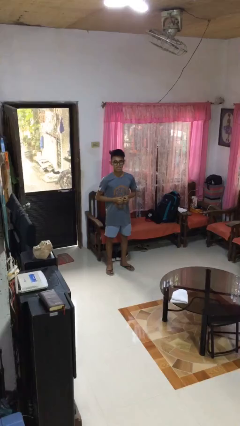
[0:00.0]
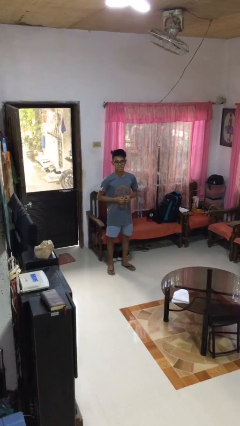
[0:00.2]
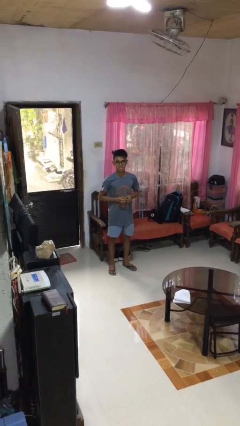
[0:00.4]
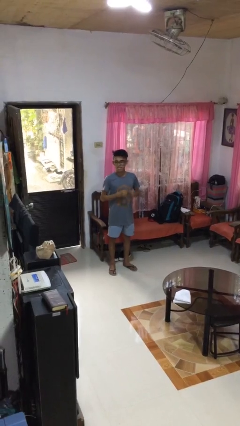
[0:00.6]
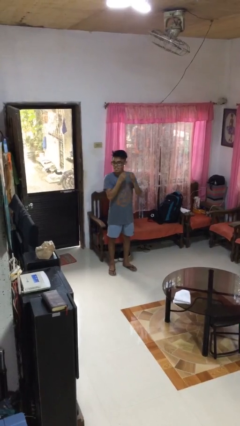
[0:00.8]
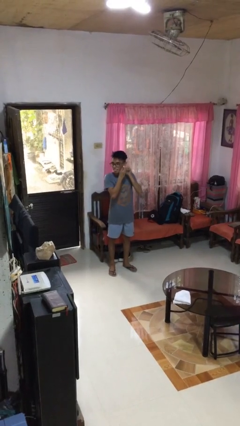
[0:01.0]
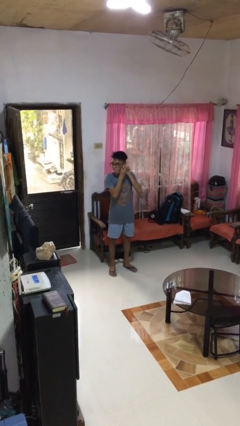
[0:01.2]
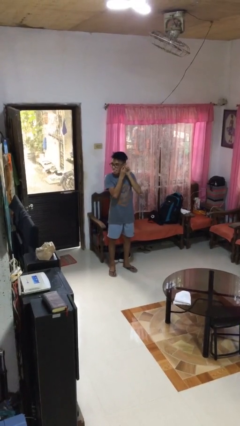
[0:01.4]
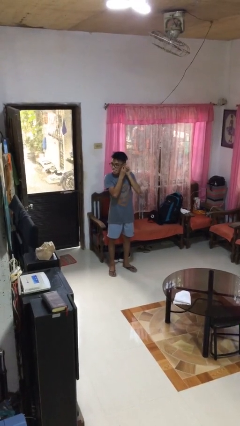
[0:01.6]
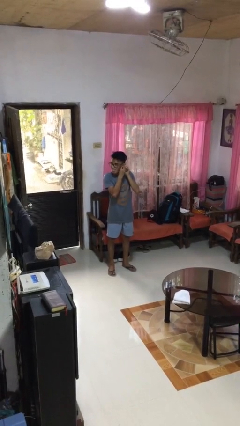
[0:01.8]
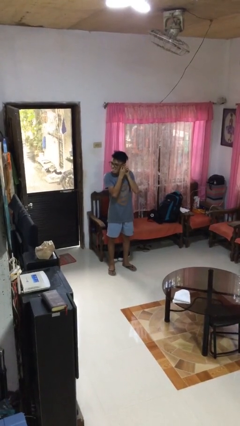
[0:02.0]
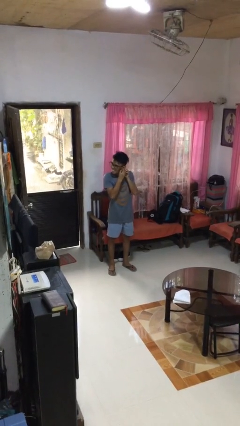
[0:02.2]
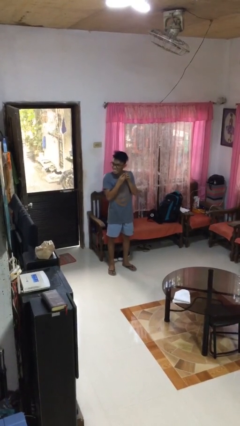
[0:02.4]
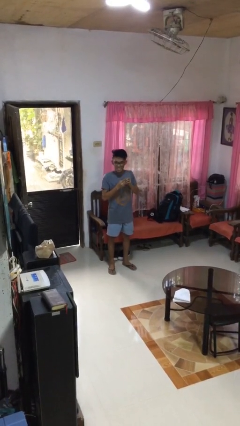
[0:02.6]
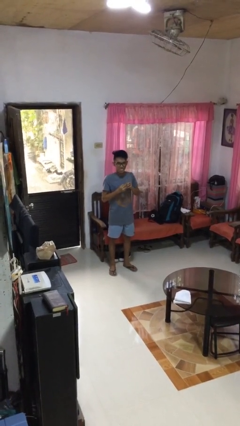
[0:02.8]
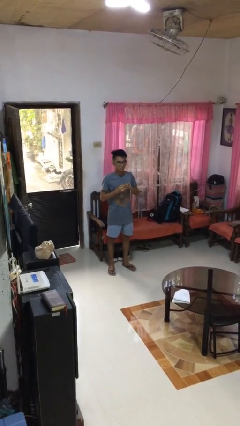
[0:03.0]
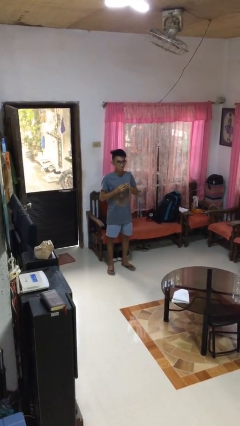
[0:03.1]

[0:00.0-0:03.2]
person takes off earrings

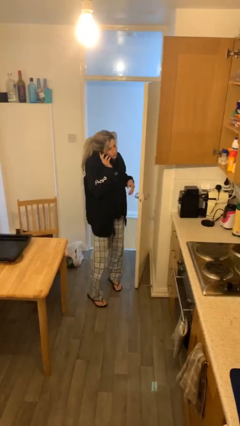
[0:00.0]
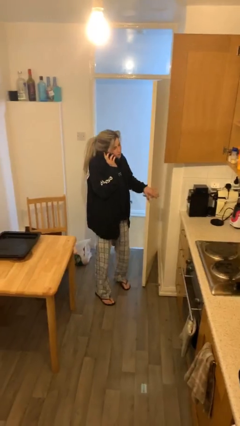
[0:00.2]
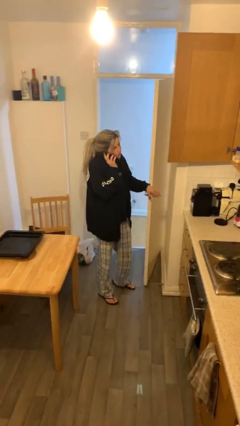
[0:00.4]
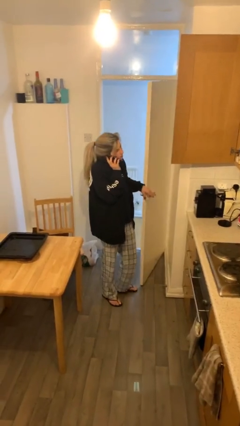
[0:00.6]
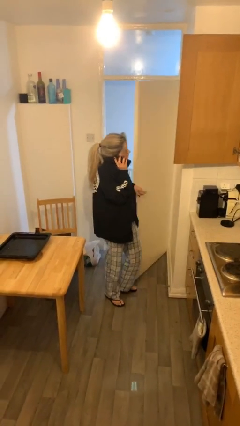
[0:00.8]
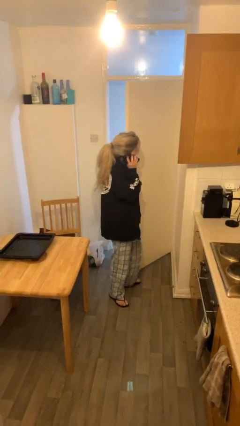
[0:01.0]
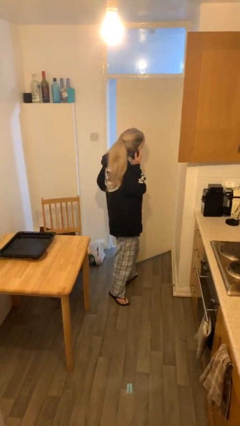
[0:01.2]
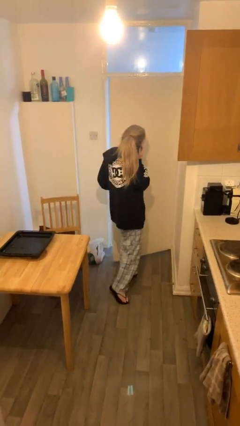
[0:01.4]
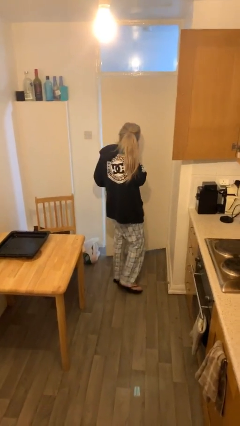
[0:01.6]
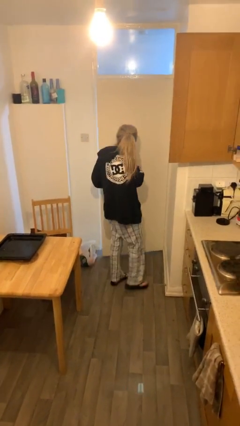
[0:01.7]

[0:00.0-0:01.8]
person closes facility door

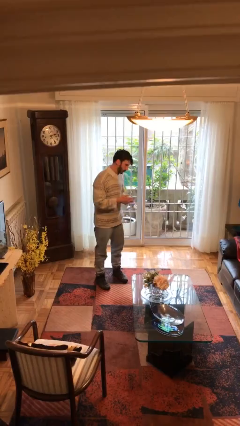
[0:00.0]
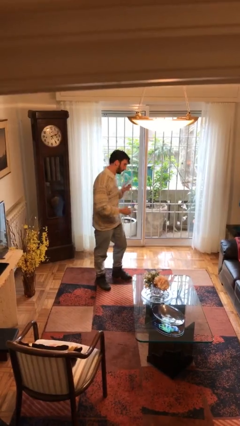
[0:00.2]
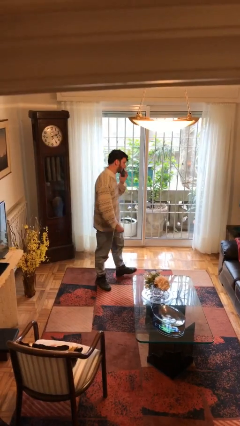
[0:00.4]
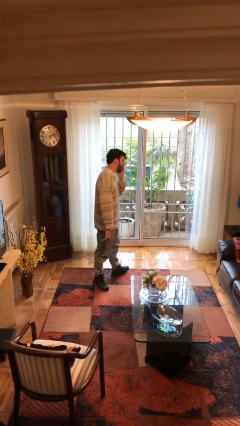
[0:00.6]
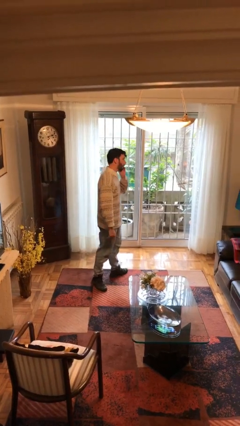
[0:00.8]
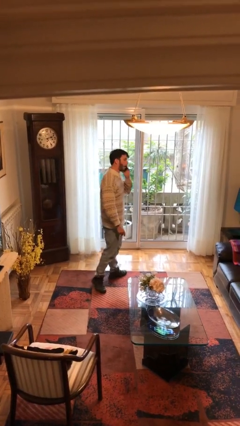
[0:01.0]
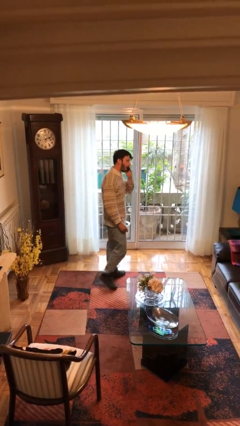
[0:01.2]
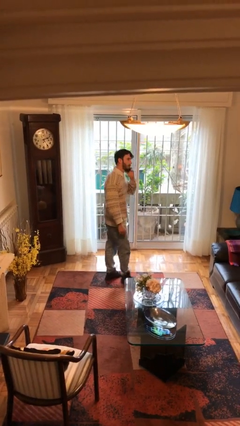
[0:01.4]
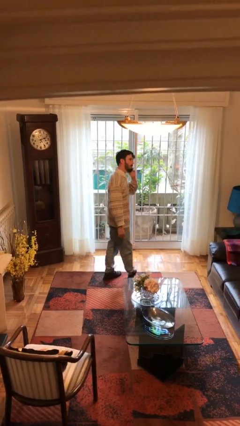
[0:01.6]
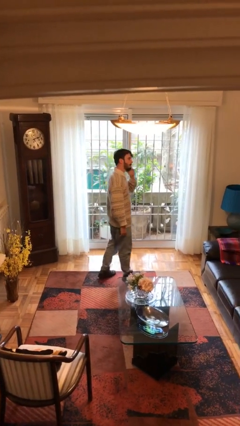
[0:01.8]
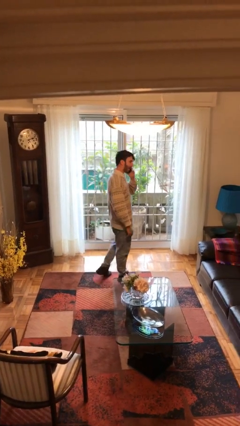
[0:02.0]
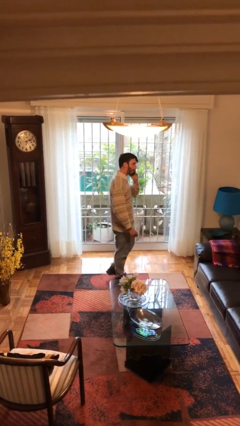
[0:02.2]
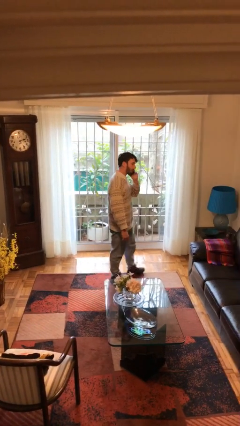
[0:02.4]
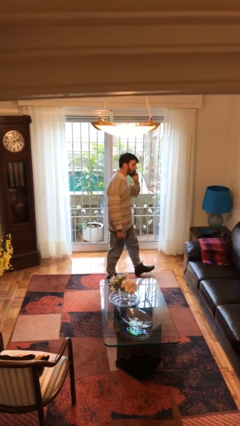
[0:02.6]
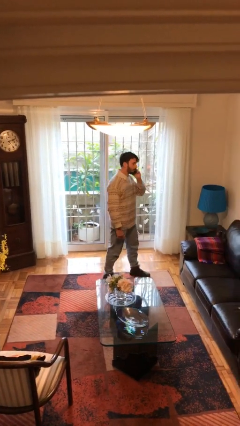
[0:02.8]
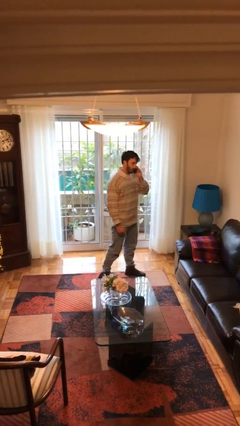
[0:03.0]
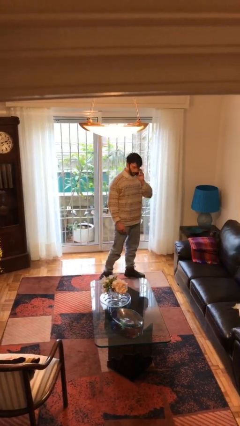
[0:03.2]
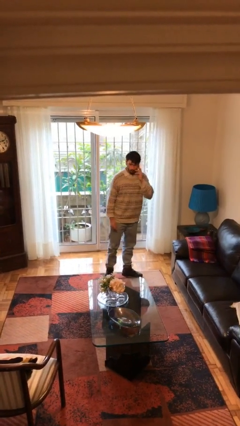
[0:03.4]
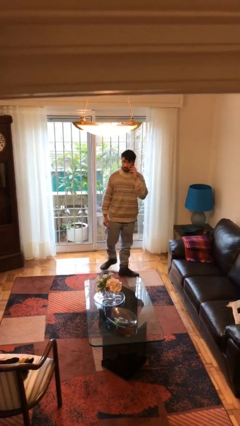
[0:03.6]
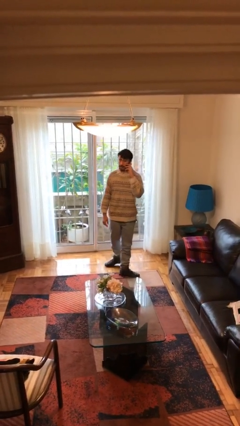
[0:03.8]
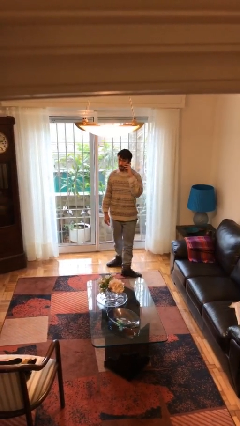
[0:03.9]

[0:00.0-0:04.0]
person talks on phone

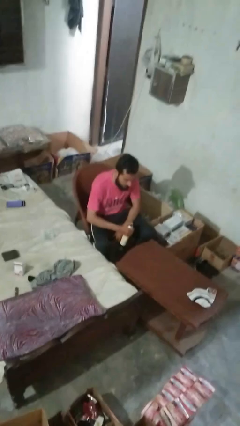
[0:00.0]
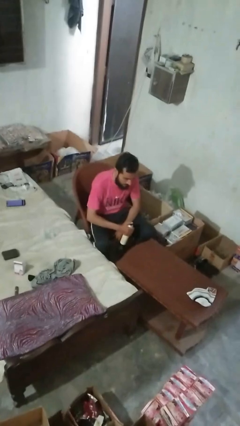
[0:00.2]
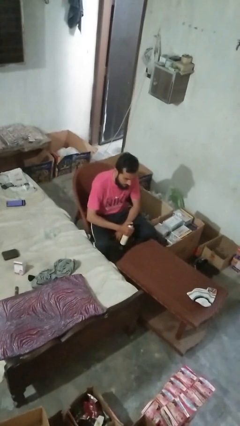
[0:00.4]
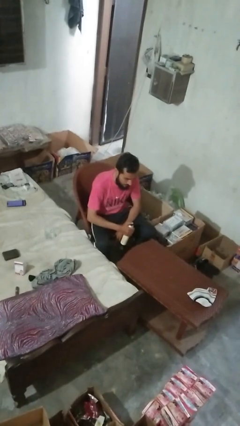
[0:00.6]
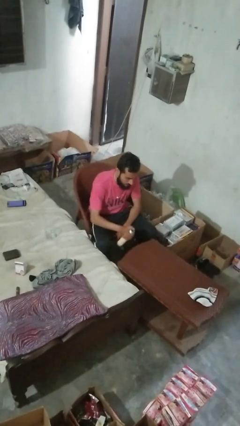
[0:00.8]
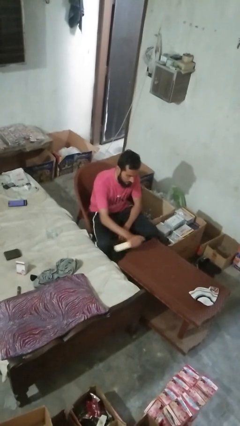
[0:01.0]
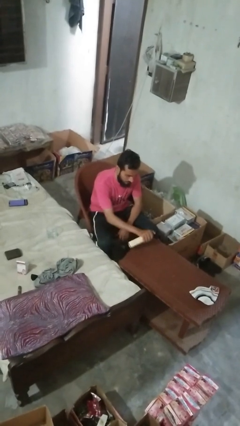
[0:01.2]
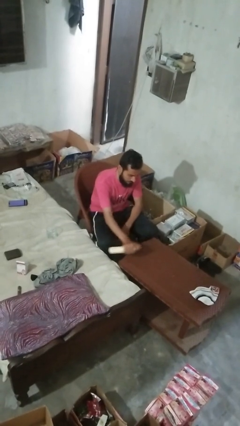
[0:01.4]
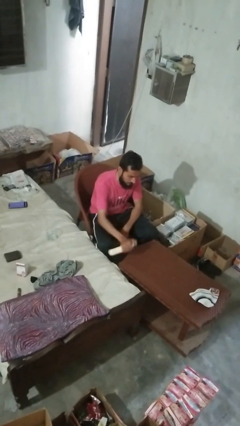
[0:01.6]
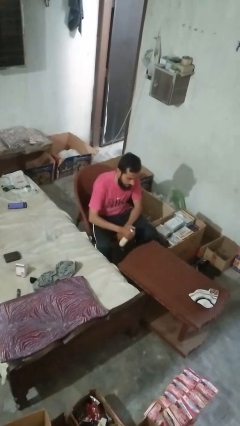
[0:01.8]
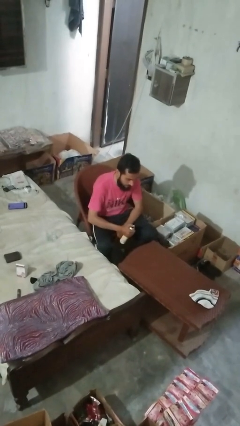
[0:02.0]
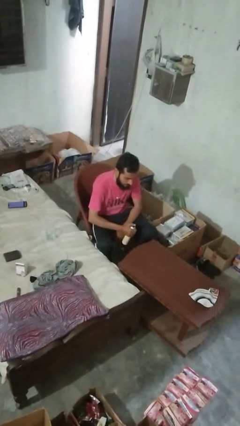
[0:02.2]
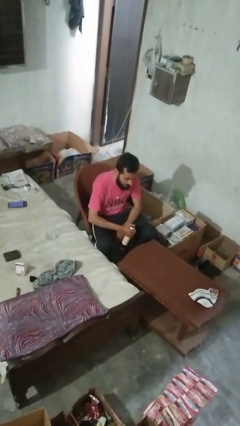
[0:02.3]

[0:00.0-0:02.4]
person sprays from bottle

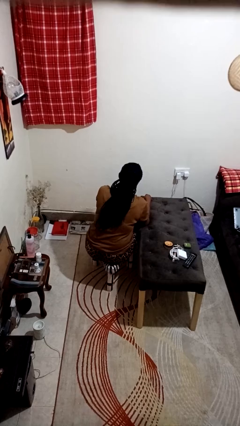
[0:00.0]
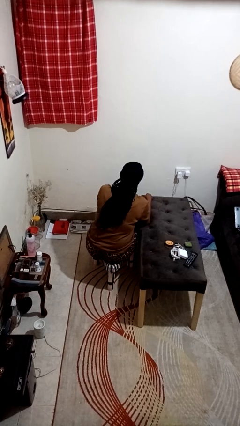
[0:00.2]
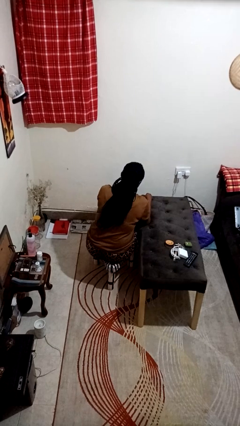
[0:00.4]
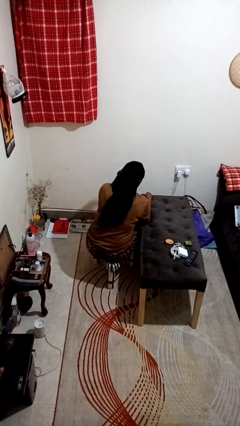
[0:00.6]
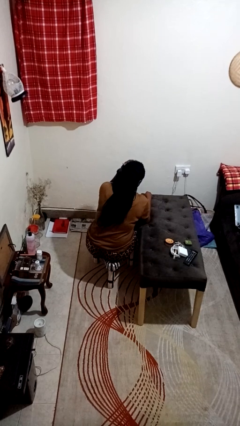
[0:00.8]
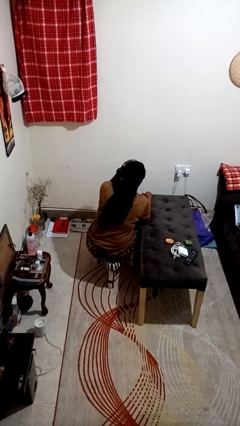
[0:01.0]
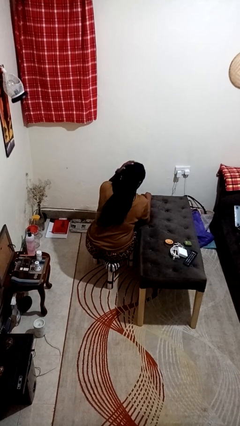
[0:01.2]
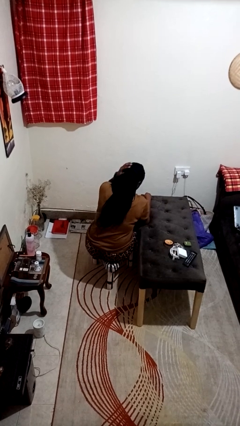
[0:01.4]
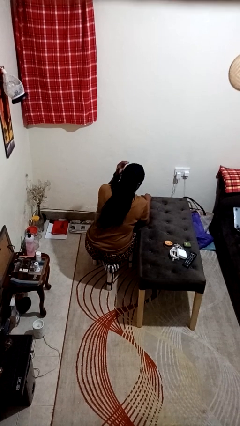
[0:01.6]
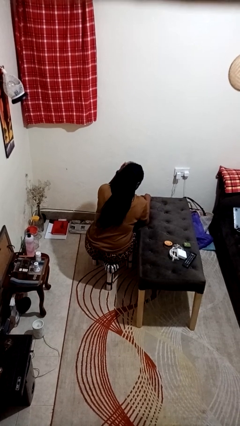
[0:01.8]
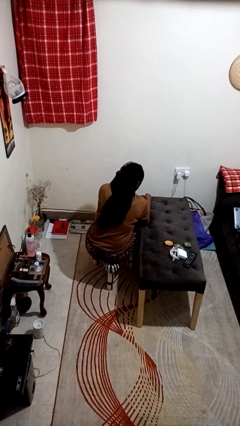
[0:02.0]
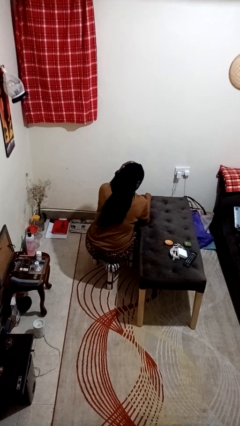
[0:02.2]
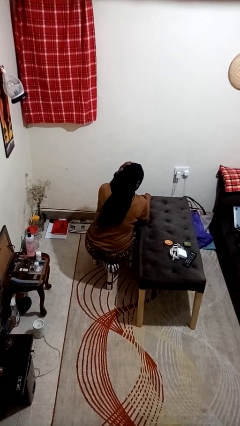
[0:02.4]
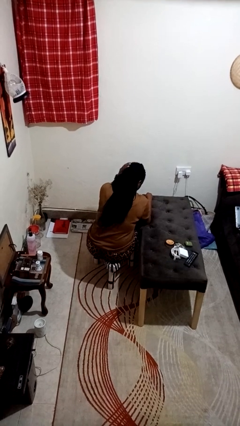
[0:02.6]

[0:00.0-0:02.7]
person strokes hair

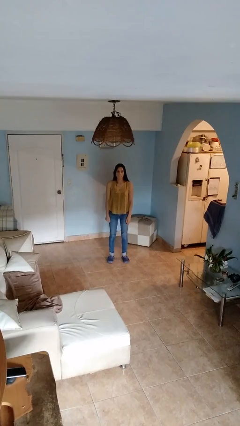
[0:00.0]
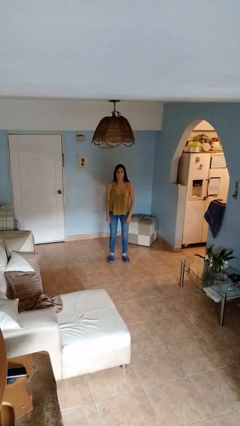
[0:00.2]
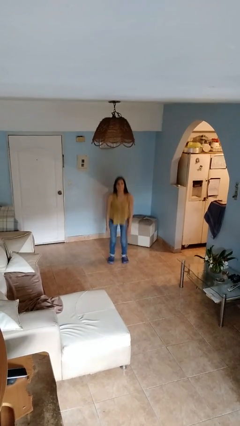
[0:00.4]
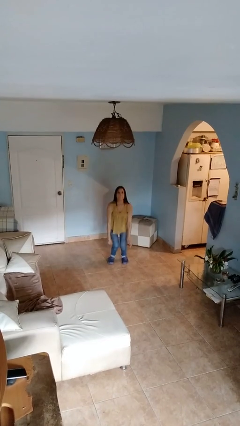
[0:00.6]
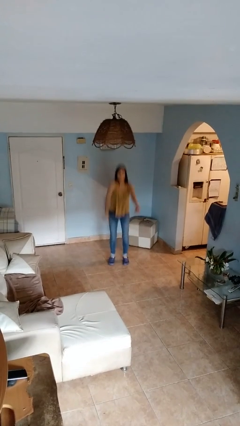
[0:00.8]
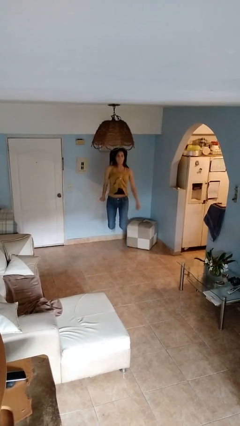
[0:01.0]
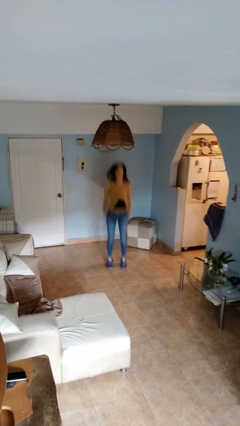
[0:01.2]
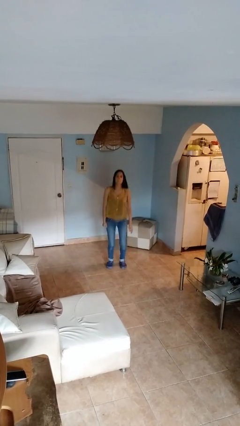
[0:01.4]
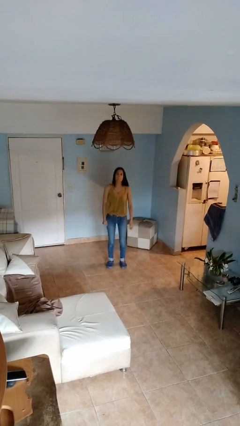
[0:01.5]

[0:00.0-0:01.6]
person jumps

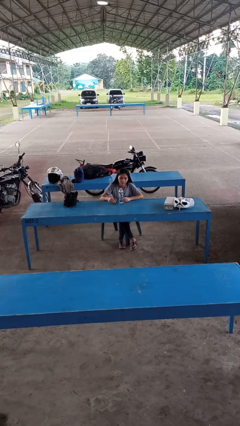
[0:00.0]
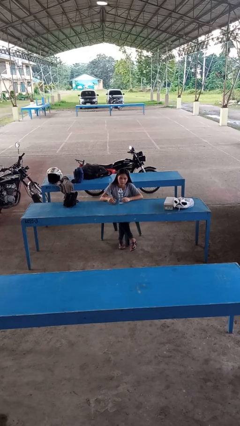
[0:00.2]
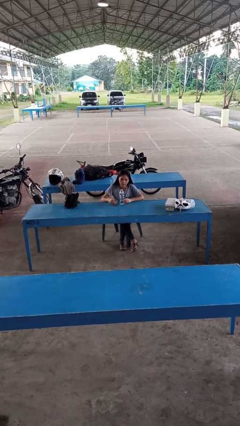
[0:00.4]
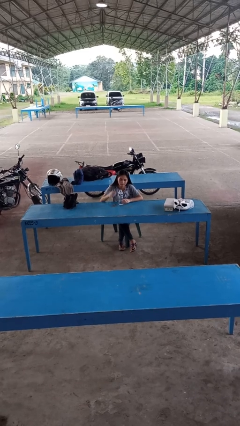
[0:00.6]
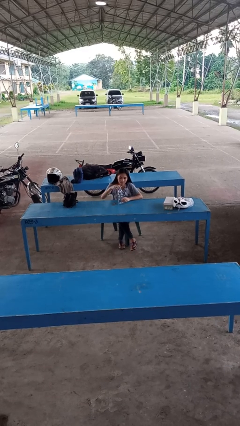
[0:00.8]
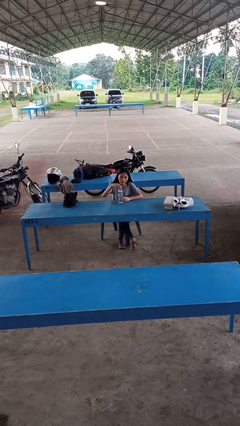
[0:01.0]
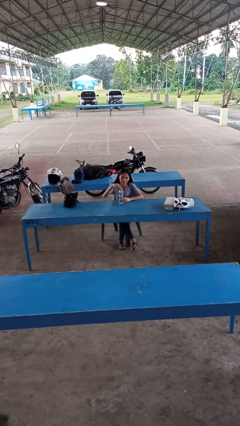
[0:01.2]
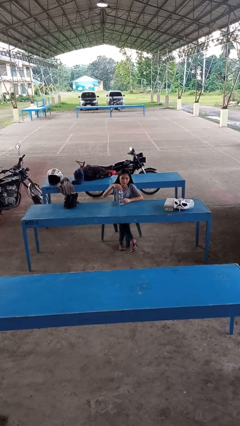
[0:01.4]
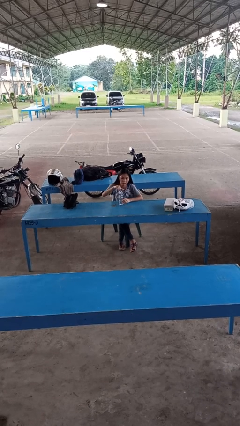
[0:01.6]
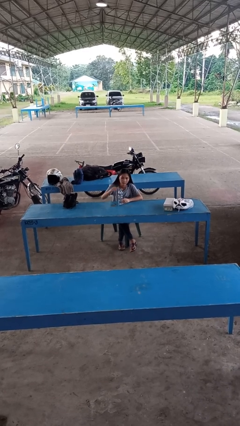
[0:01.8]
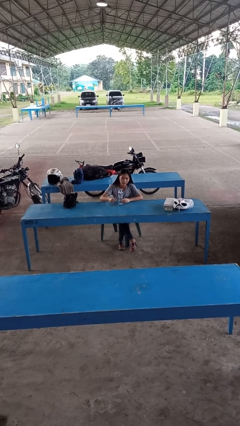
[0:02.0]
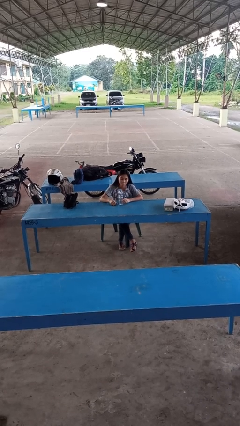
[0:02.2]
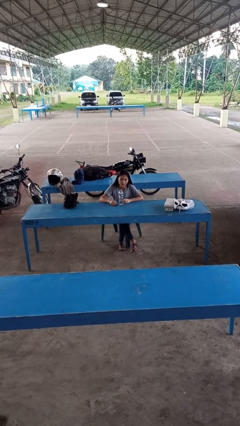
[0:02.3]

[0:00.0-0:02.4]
person screws lid to bottle
